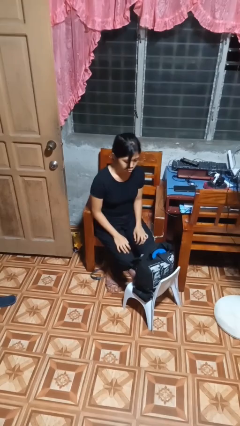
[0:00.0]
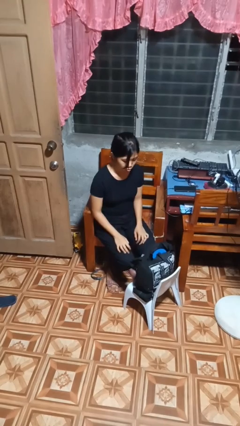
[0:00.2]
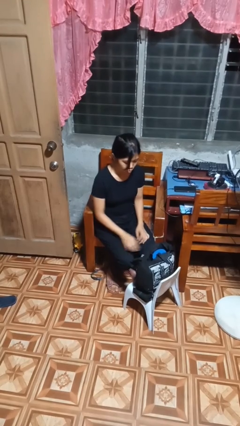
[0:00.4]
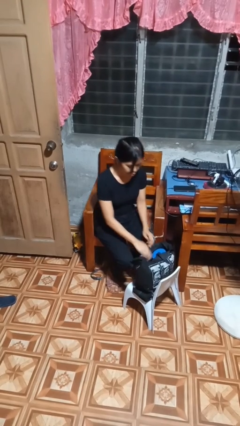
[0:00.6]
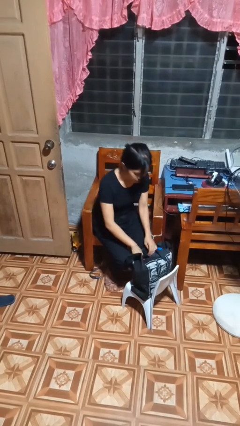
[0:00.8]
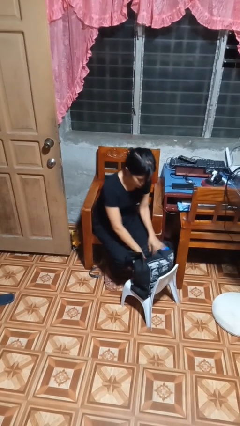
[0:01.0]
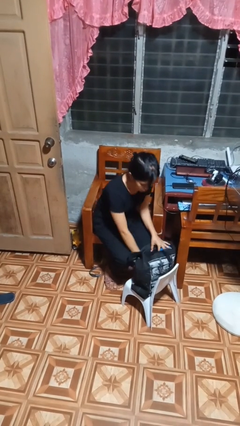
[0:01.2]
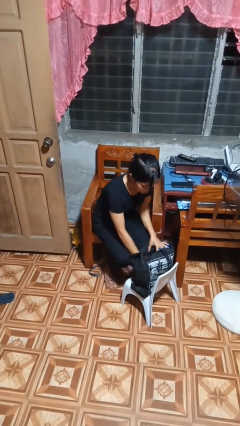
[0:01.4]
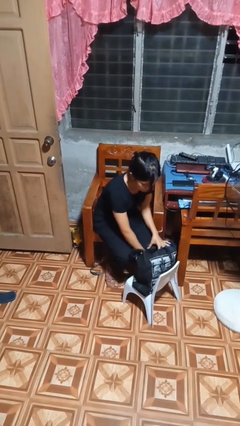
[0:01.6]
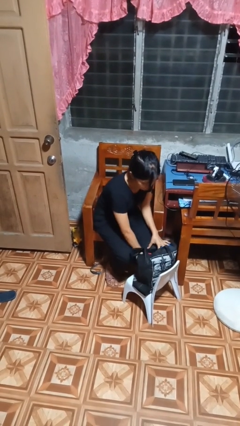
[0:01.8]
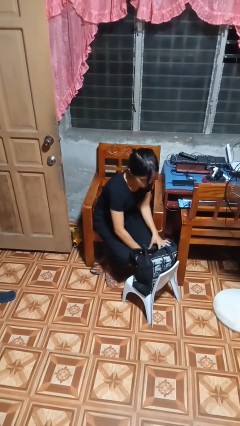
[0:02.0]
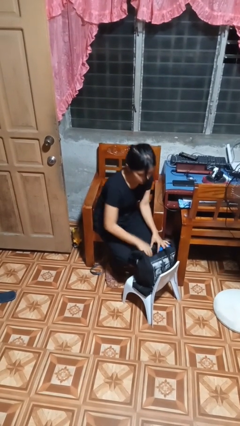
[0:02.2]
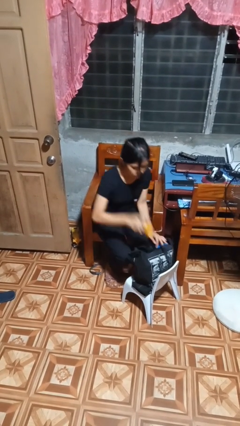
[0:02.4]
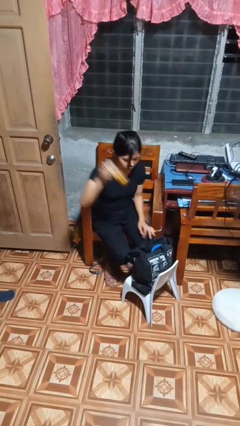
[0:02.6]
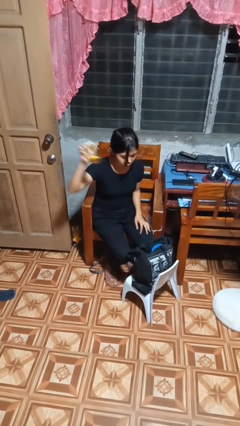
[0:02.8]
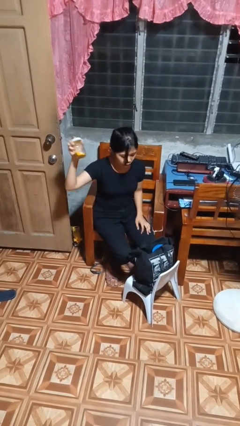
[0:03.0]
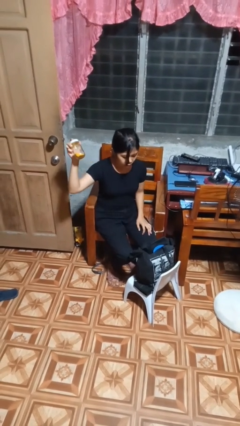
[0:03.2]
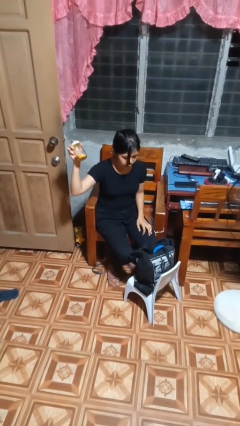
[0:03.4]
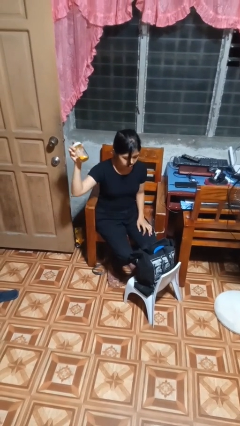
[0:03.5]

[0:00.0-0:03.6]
person searches in bag

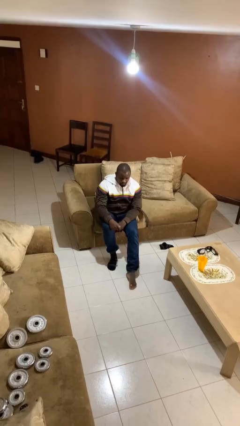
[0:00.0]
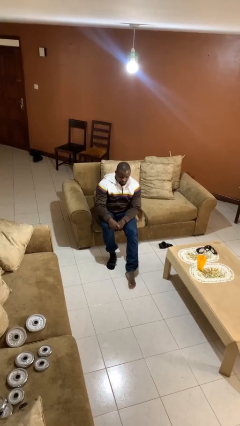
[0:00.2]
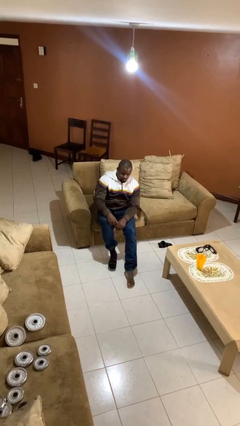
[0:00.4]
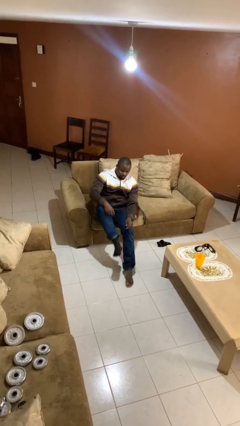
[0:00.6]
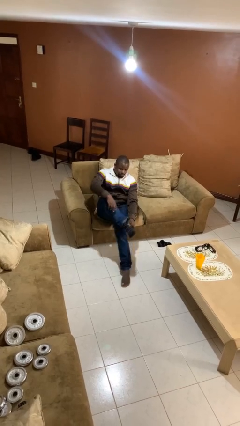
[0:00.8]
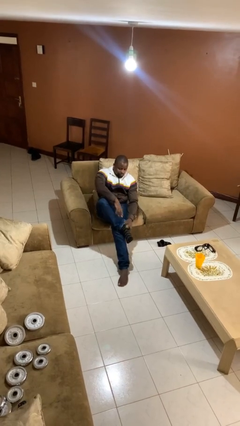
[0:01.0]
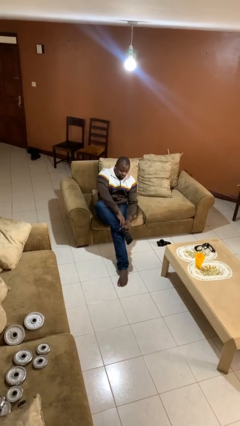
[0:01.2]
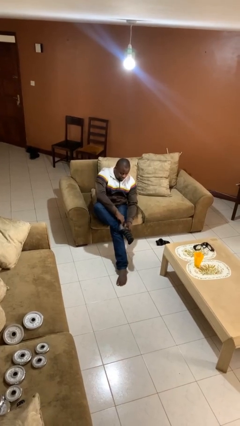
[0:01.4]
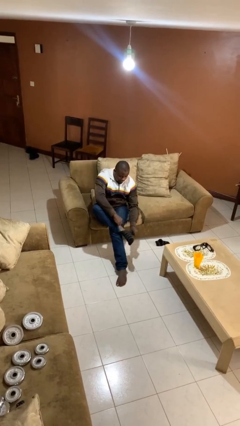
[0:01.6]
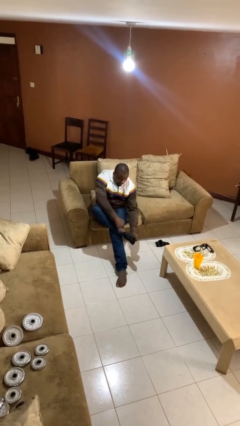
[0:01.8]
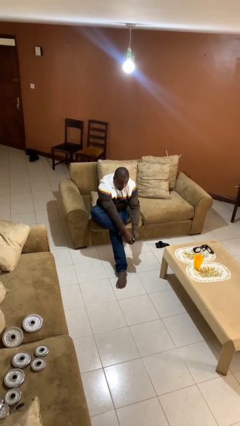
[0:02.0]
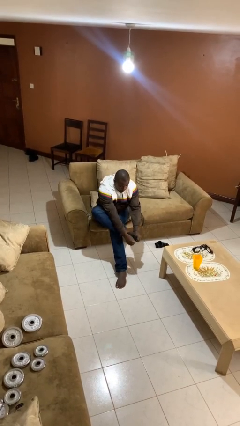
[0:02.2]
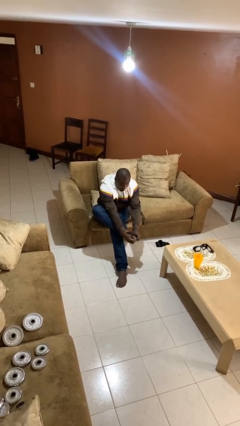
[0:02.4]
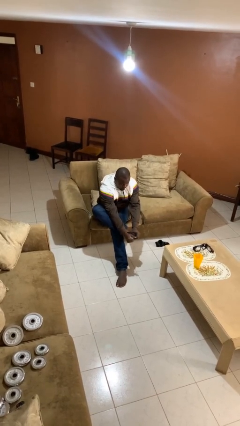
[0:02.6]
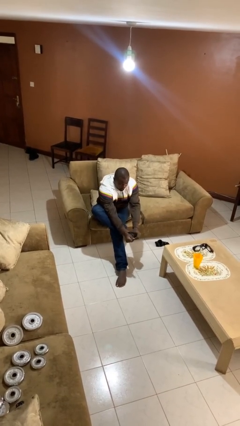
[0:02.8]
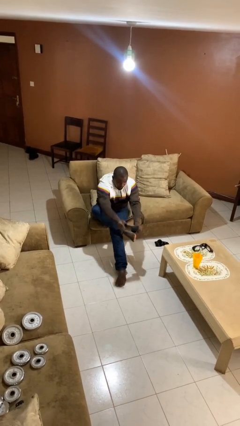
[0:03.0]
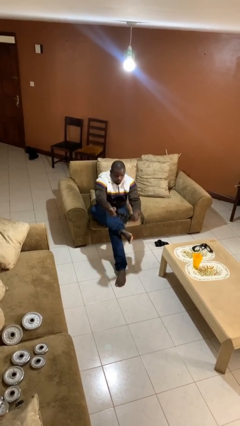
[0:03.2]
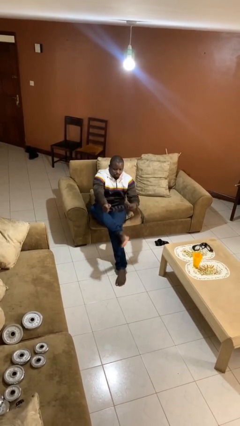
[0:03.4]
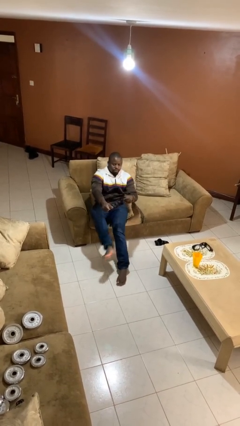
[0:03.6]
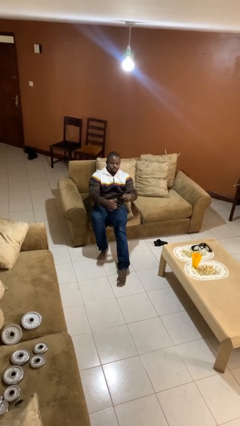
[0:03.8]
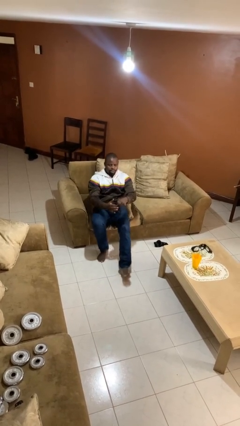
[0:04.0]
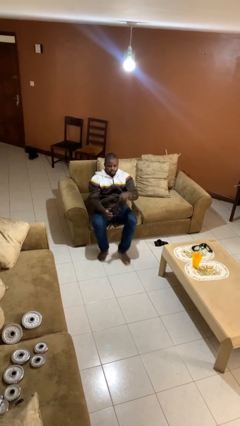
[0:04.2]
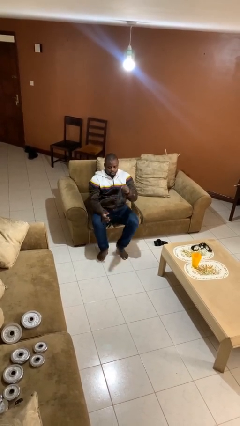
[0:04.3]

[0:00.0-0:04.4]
person takes off socks

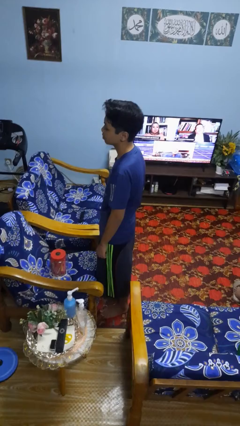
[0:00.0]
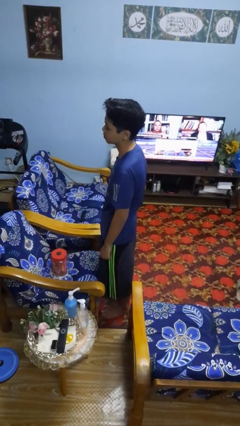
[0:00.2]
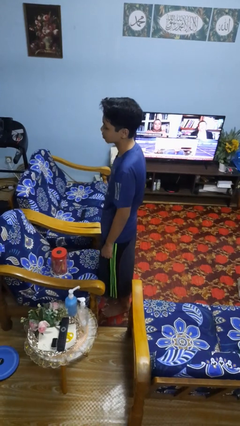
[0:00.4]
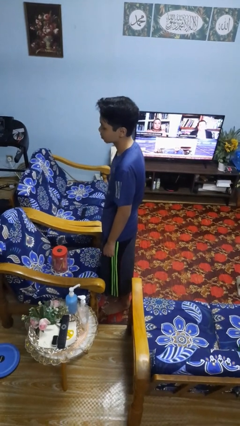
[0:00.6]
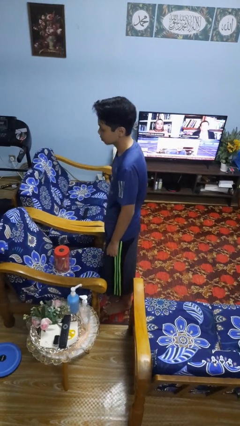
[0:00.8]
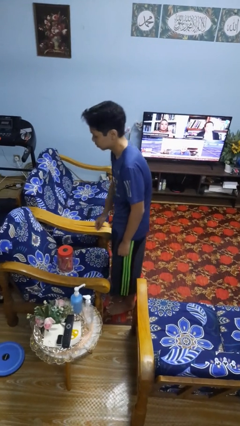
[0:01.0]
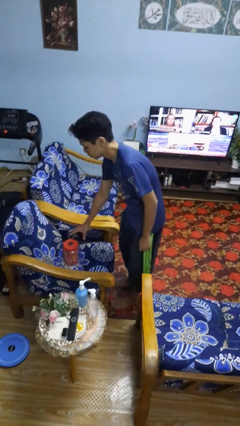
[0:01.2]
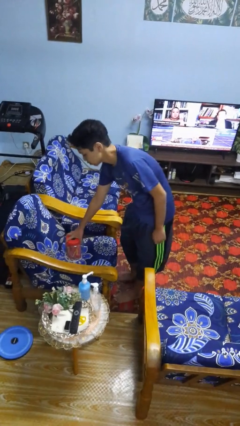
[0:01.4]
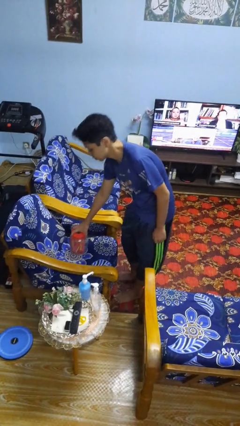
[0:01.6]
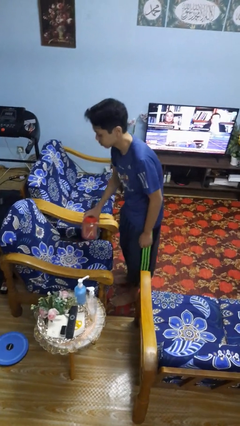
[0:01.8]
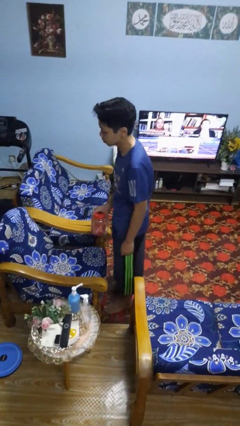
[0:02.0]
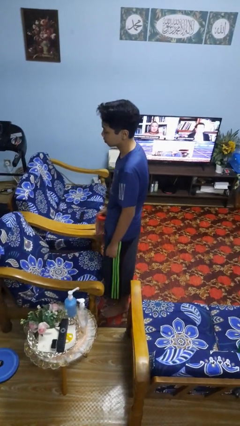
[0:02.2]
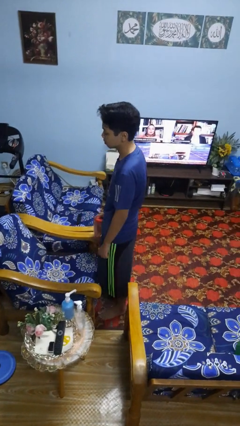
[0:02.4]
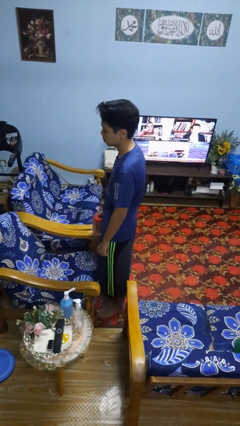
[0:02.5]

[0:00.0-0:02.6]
person picks up object from couch

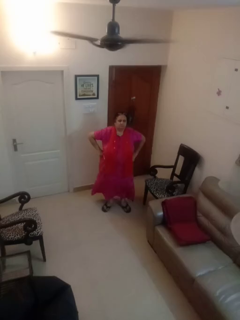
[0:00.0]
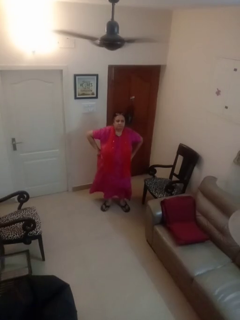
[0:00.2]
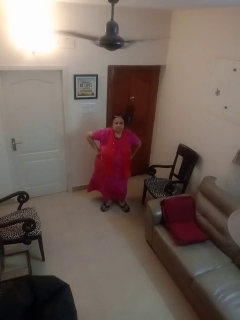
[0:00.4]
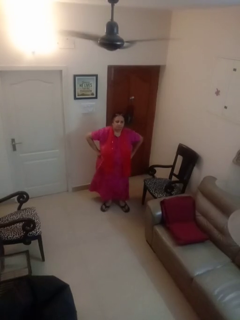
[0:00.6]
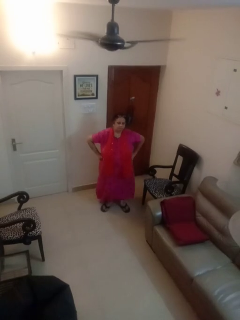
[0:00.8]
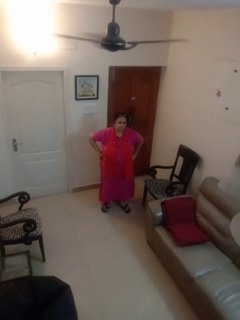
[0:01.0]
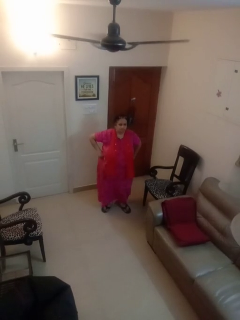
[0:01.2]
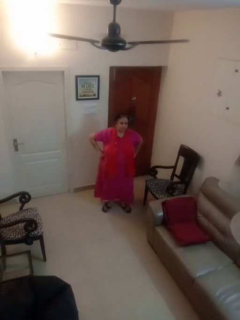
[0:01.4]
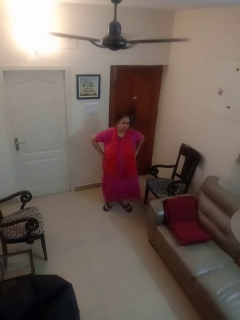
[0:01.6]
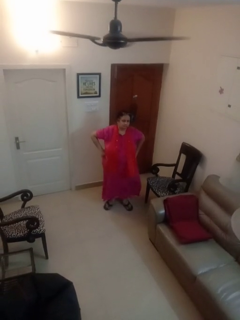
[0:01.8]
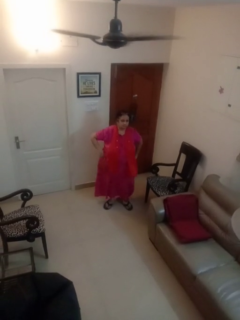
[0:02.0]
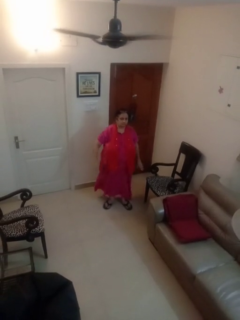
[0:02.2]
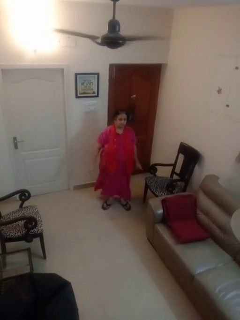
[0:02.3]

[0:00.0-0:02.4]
person wiggles hips

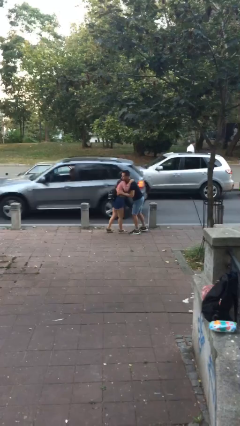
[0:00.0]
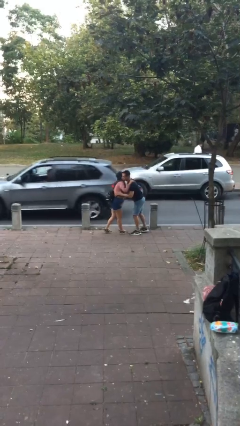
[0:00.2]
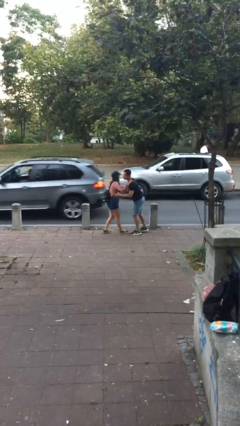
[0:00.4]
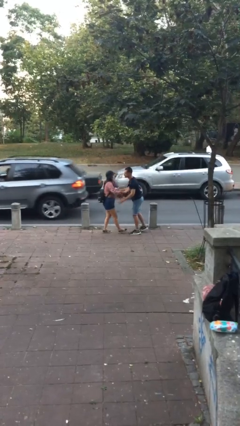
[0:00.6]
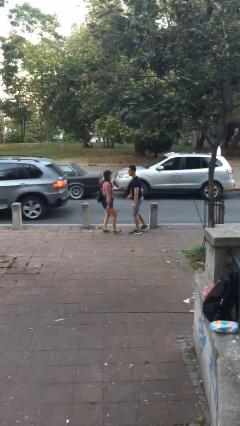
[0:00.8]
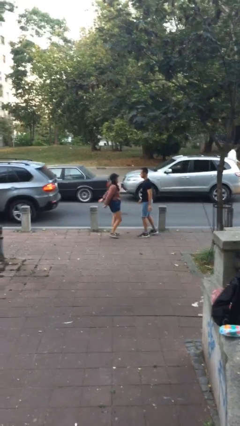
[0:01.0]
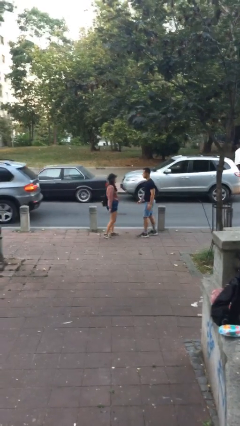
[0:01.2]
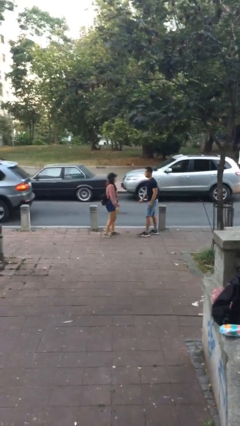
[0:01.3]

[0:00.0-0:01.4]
person embraces person

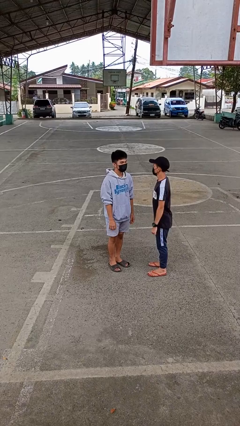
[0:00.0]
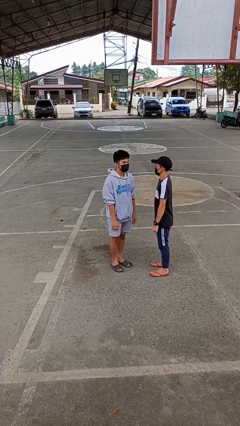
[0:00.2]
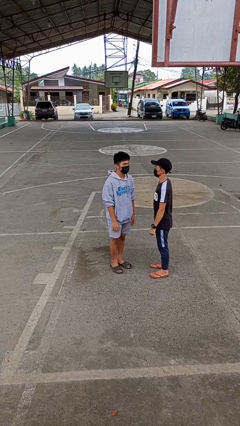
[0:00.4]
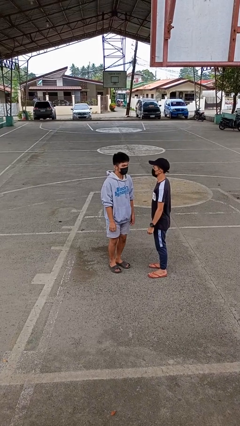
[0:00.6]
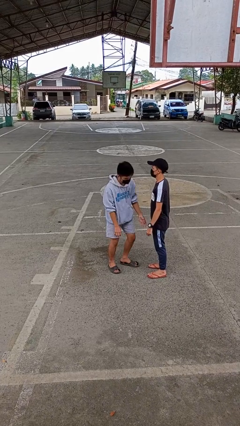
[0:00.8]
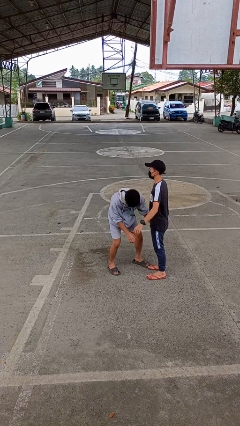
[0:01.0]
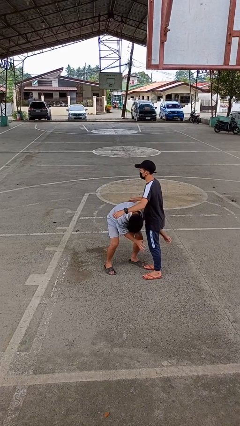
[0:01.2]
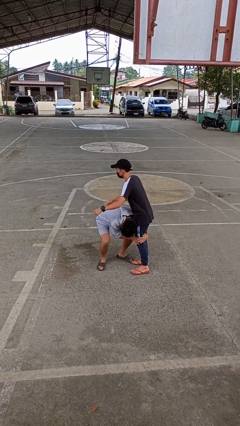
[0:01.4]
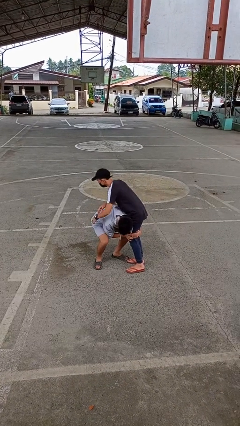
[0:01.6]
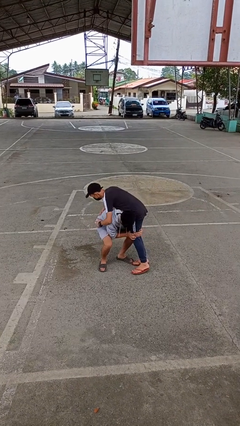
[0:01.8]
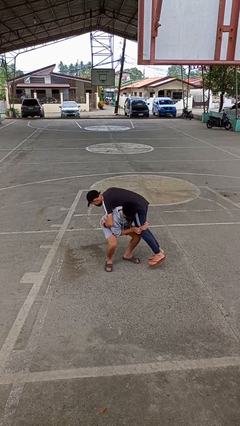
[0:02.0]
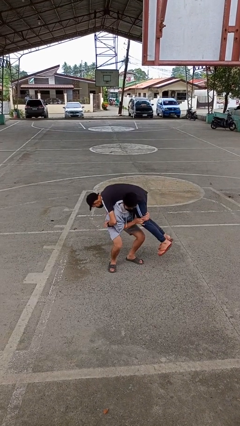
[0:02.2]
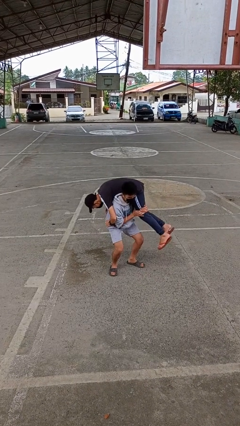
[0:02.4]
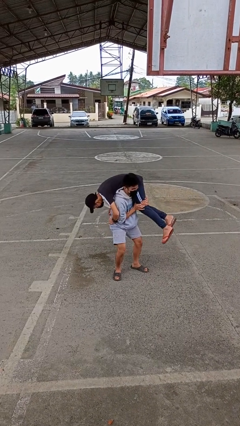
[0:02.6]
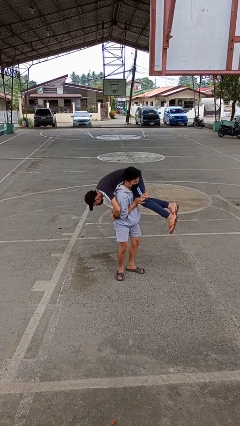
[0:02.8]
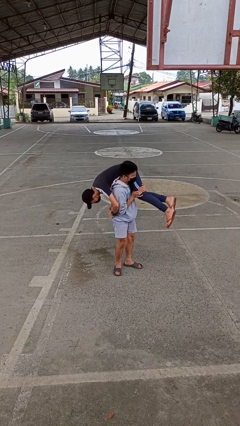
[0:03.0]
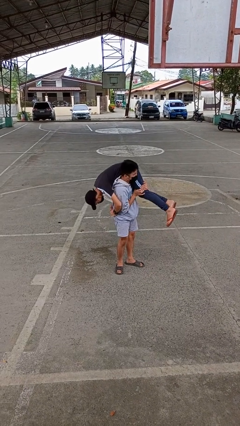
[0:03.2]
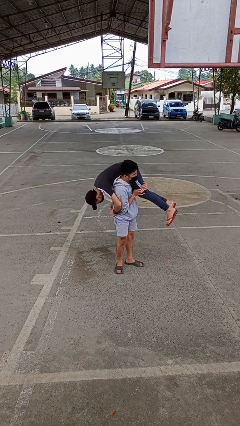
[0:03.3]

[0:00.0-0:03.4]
person carries person over shoulder
